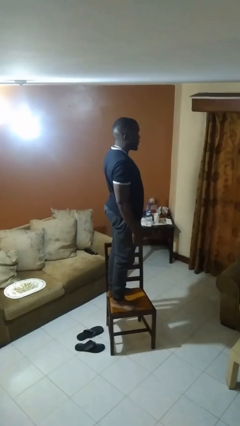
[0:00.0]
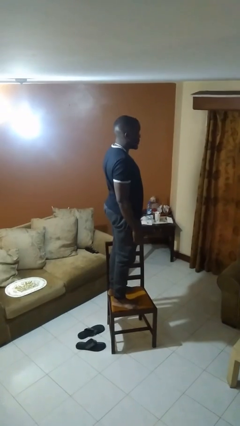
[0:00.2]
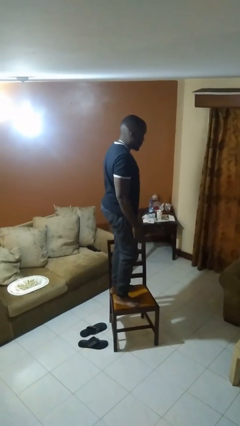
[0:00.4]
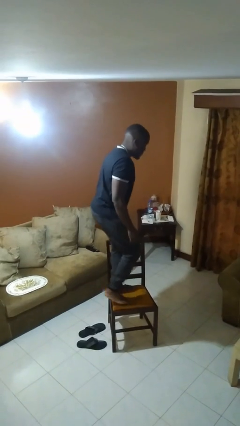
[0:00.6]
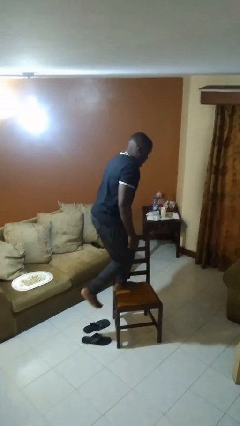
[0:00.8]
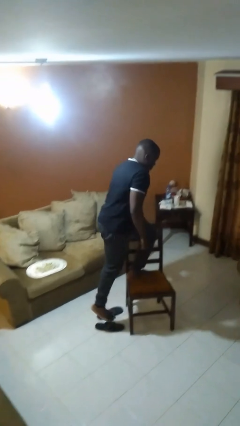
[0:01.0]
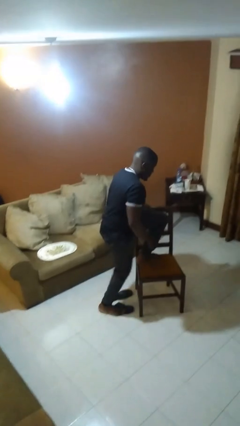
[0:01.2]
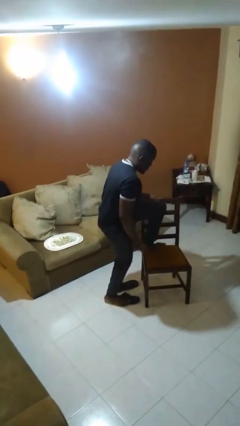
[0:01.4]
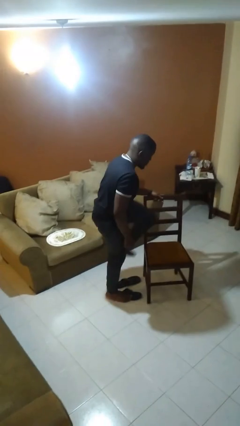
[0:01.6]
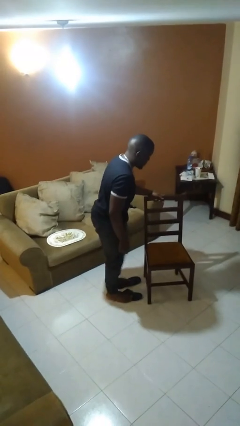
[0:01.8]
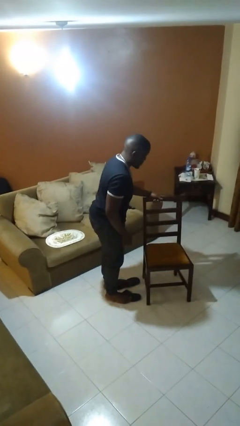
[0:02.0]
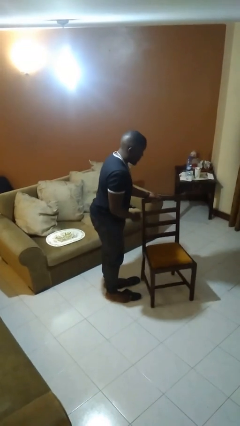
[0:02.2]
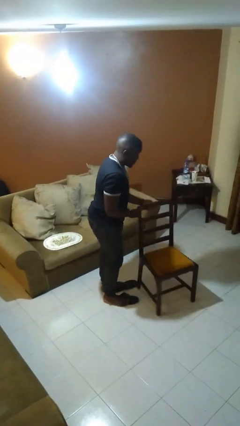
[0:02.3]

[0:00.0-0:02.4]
person climbs off chair

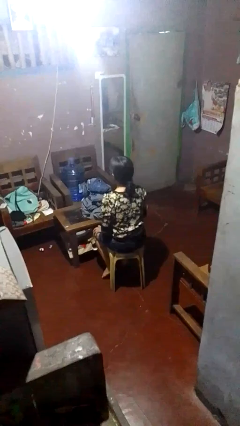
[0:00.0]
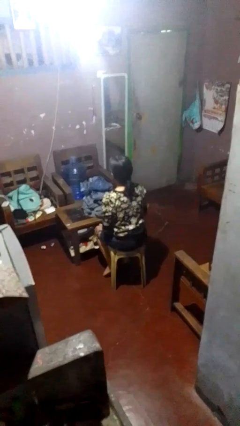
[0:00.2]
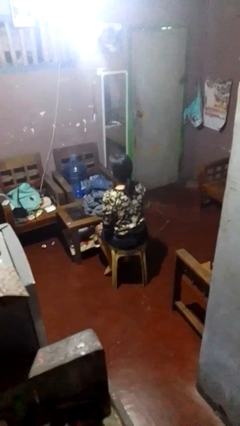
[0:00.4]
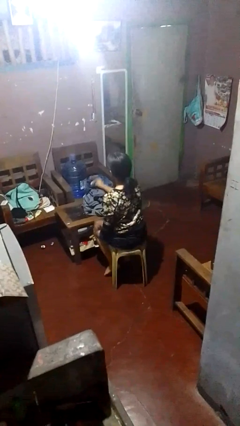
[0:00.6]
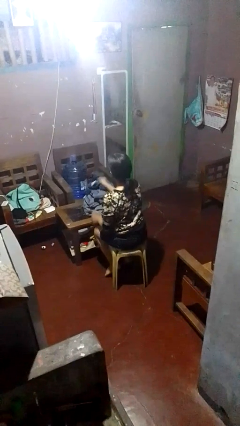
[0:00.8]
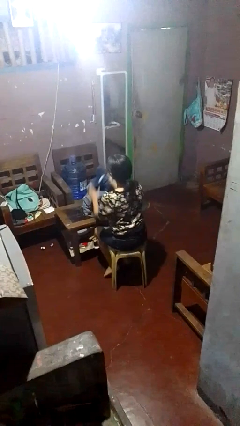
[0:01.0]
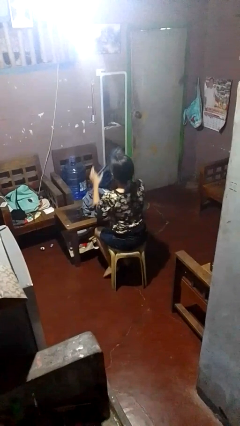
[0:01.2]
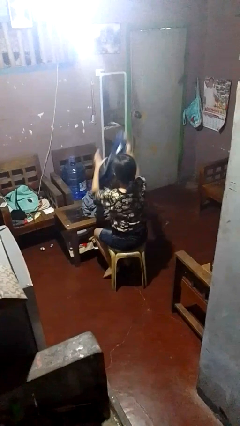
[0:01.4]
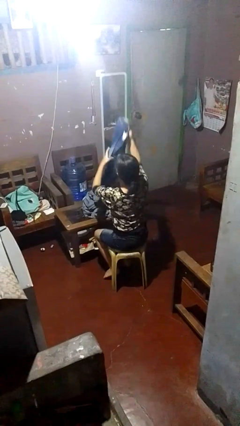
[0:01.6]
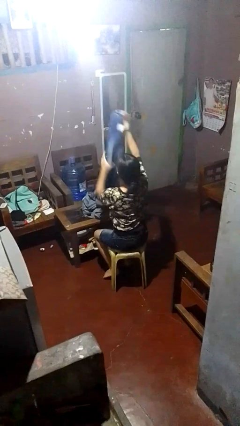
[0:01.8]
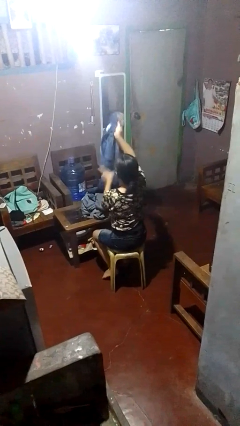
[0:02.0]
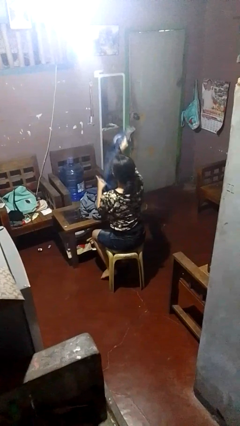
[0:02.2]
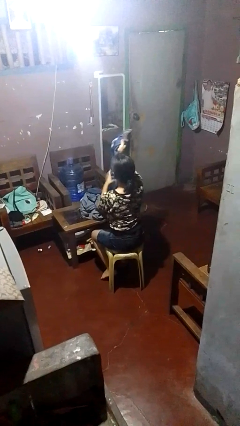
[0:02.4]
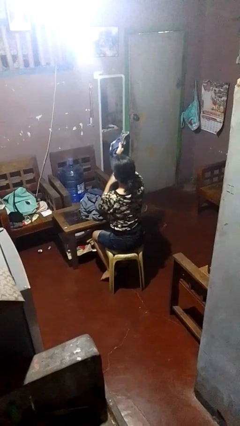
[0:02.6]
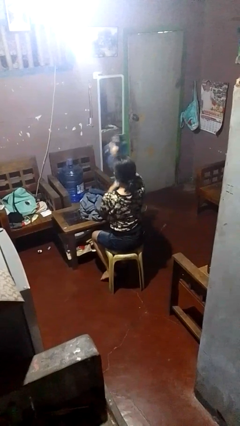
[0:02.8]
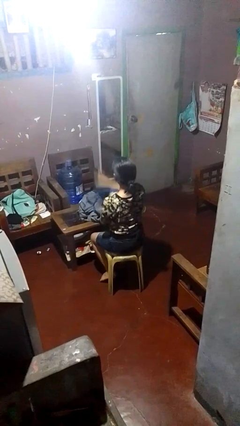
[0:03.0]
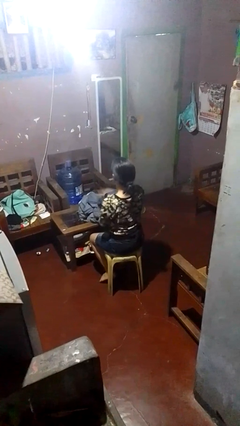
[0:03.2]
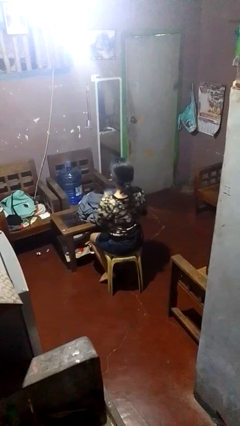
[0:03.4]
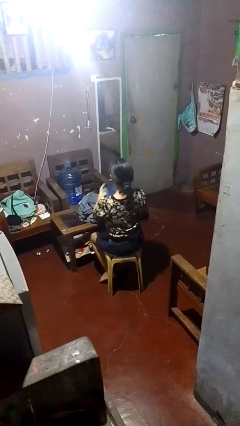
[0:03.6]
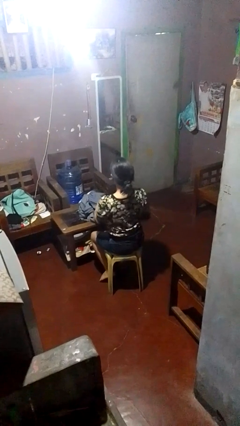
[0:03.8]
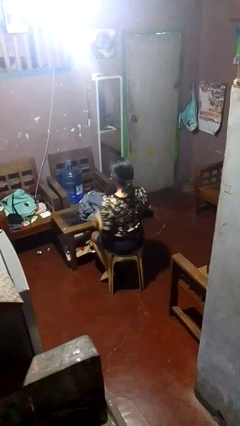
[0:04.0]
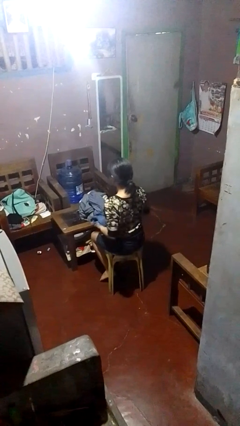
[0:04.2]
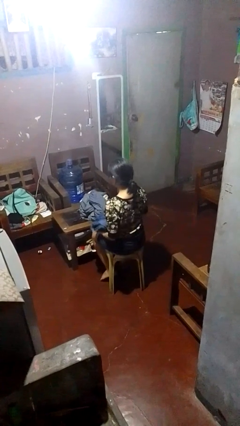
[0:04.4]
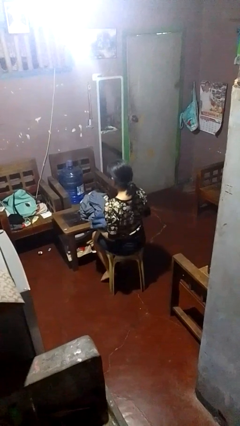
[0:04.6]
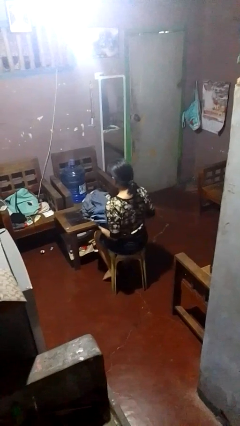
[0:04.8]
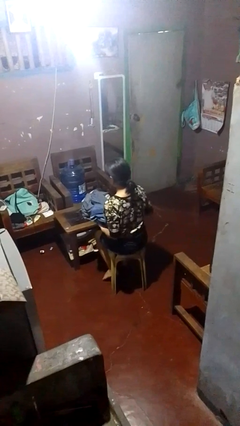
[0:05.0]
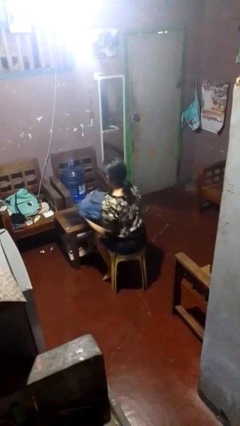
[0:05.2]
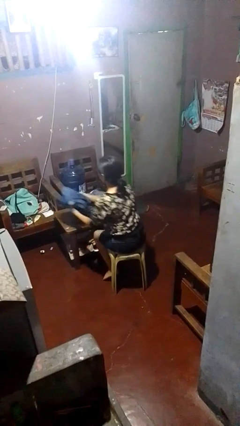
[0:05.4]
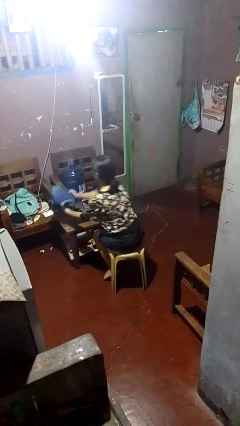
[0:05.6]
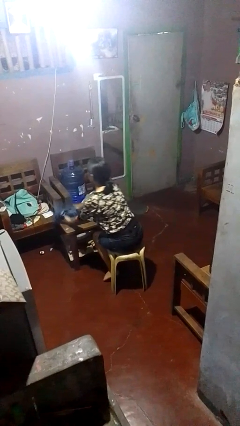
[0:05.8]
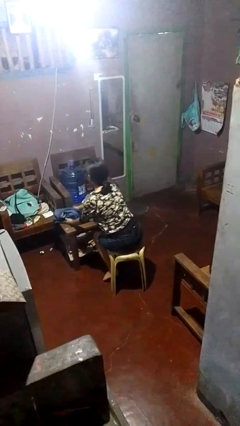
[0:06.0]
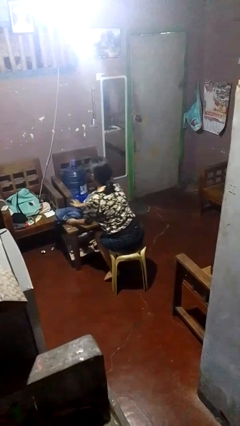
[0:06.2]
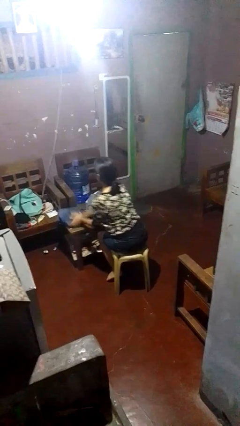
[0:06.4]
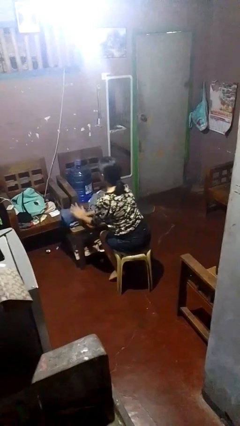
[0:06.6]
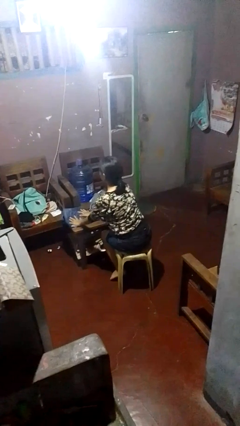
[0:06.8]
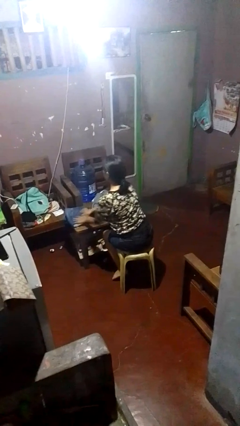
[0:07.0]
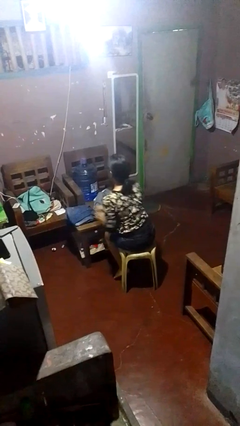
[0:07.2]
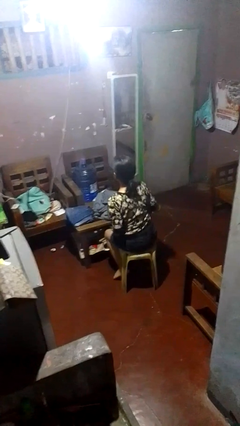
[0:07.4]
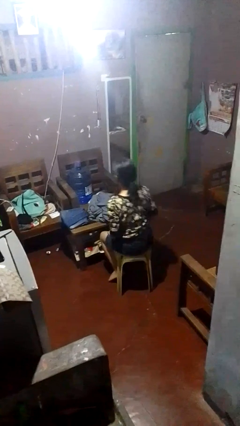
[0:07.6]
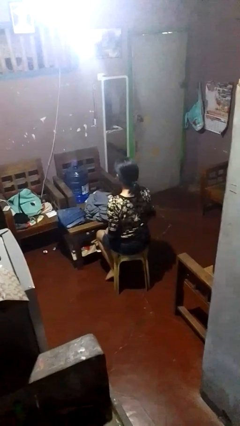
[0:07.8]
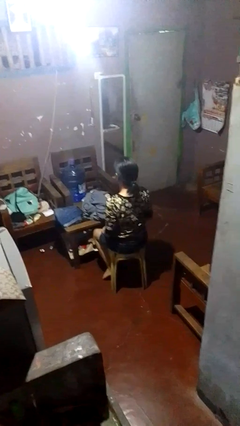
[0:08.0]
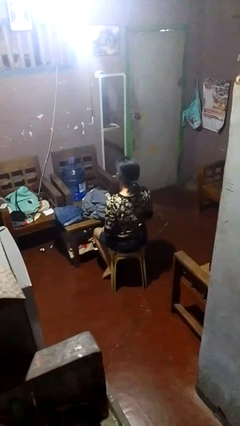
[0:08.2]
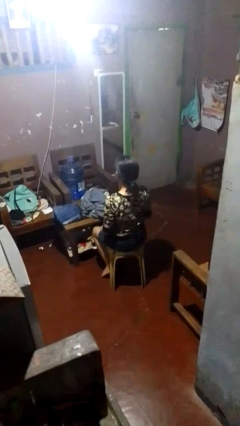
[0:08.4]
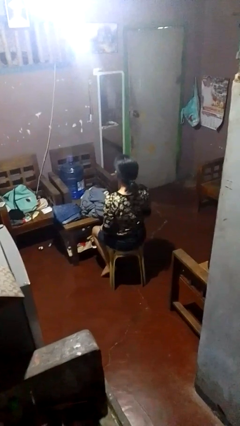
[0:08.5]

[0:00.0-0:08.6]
person folds pants

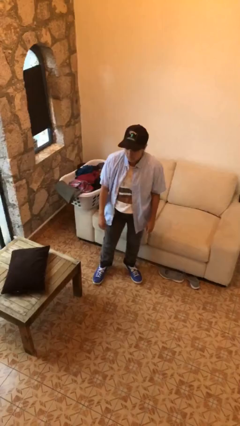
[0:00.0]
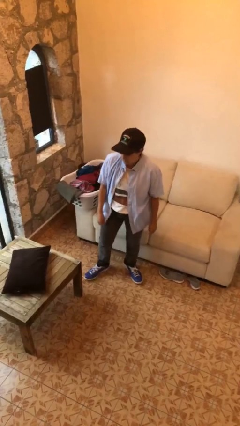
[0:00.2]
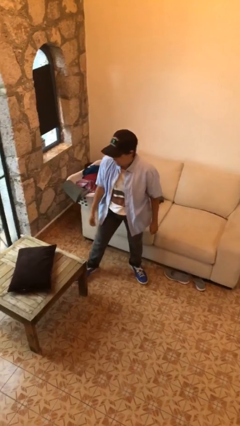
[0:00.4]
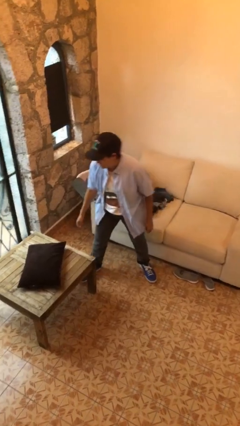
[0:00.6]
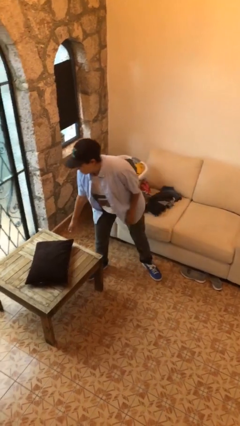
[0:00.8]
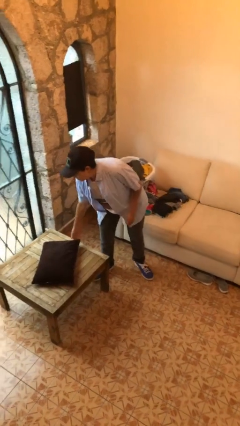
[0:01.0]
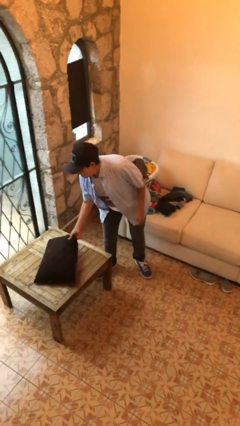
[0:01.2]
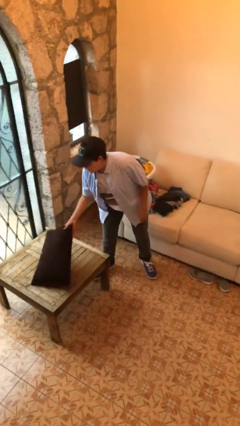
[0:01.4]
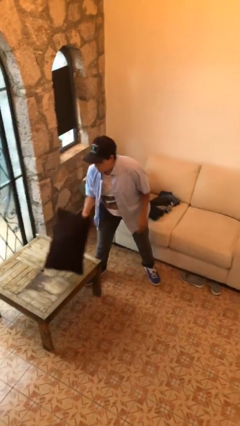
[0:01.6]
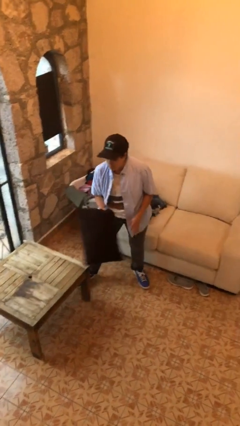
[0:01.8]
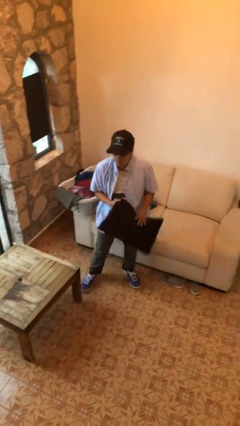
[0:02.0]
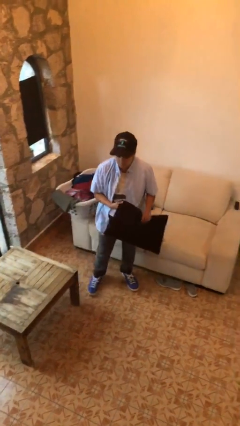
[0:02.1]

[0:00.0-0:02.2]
person picks up object from table

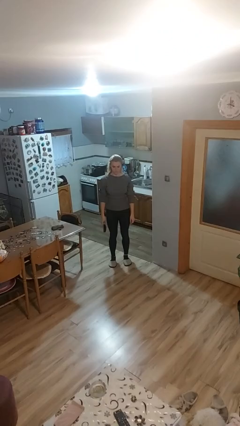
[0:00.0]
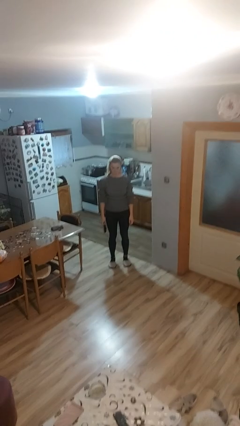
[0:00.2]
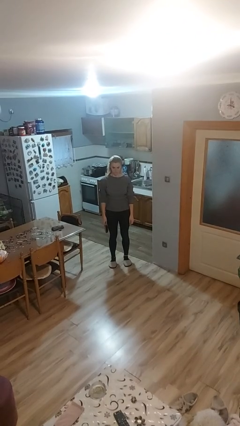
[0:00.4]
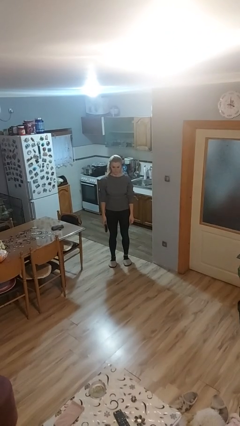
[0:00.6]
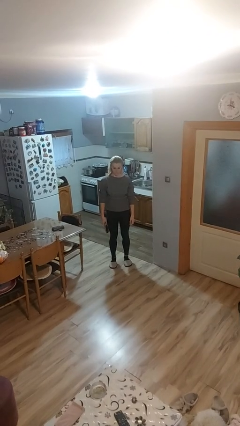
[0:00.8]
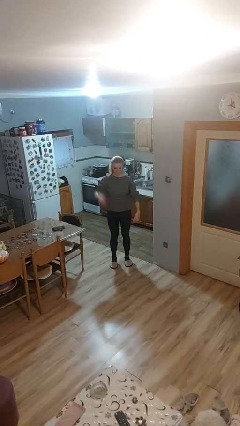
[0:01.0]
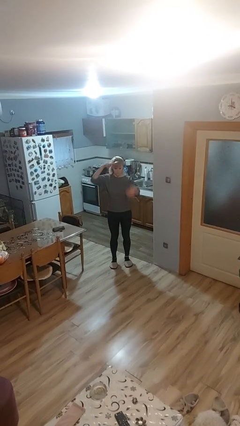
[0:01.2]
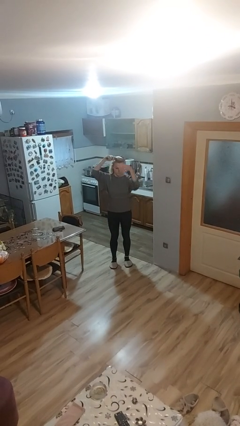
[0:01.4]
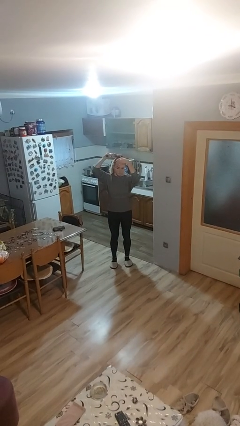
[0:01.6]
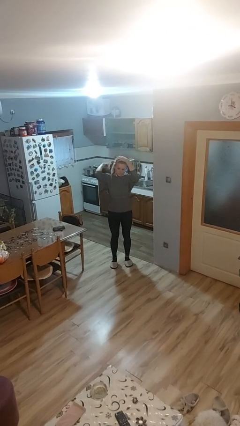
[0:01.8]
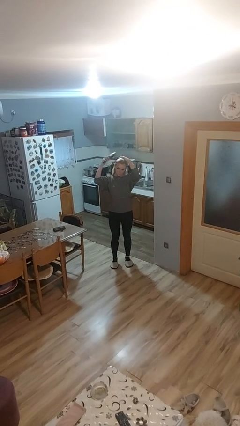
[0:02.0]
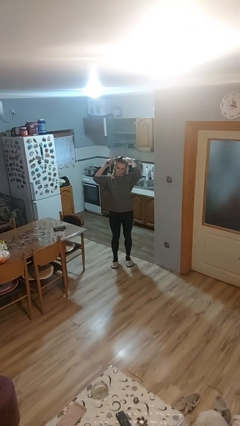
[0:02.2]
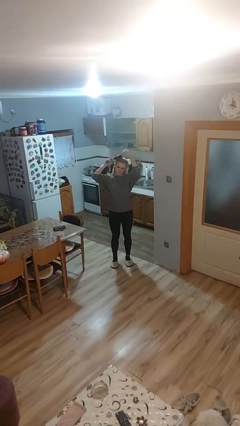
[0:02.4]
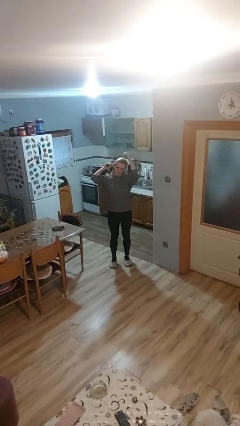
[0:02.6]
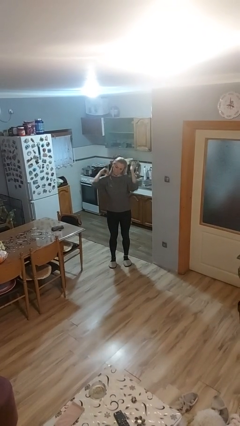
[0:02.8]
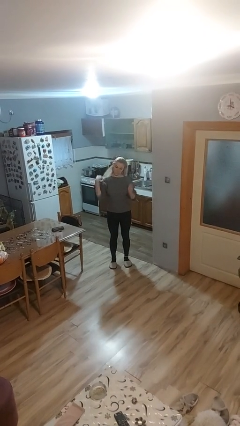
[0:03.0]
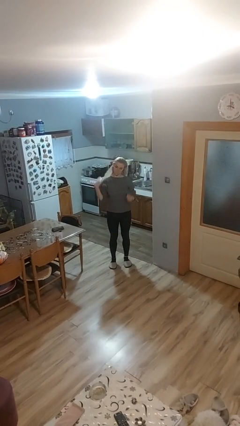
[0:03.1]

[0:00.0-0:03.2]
person brushes hair

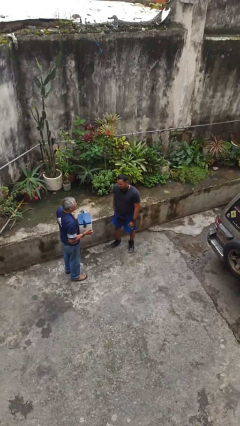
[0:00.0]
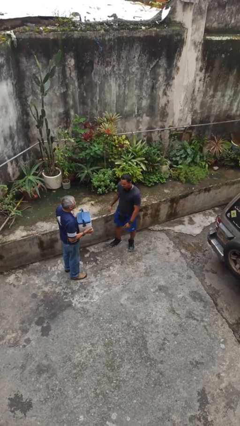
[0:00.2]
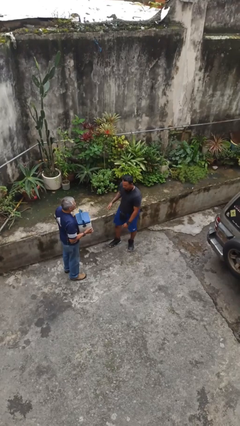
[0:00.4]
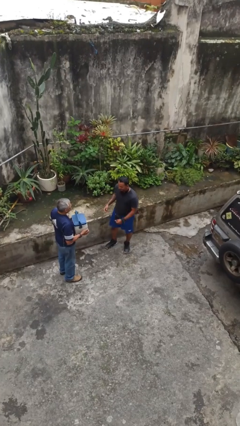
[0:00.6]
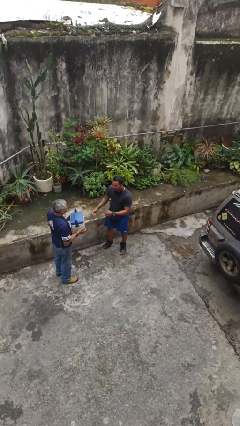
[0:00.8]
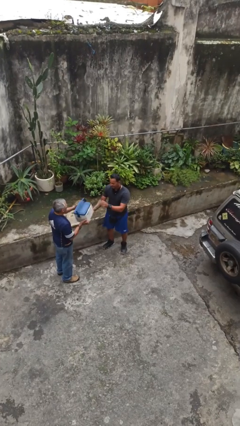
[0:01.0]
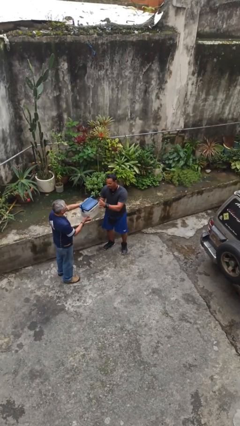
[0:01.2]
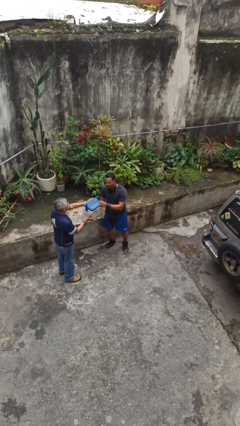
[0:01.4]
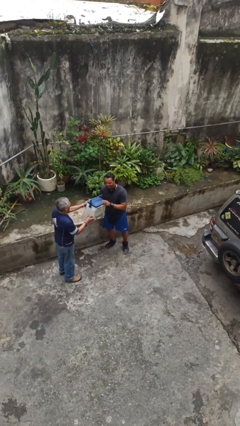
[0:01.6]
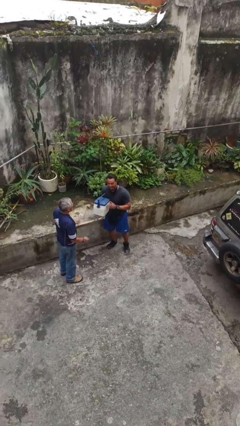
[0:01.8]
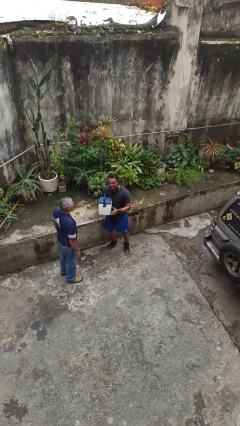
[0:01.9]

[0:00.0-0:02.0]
person transfers object to person
